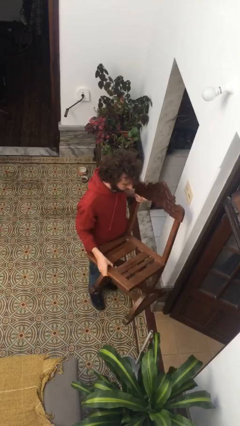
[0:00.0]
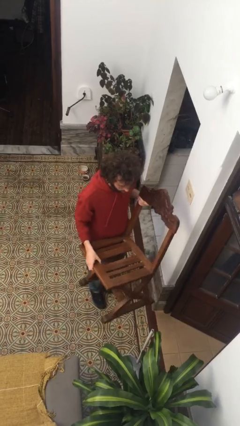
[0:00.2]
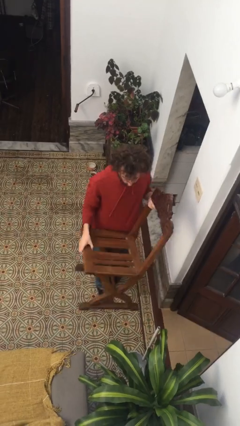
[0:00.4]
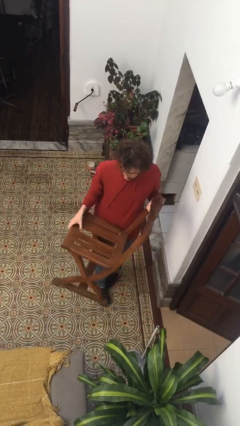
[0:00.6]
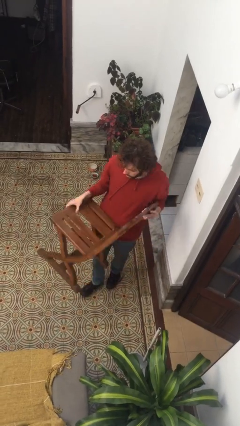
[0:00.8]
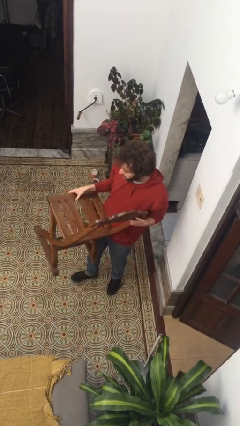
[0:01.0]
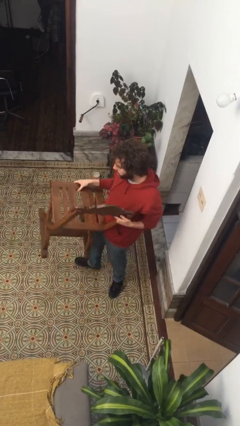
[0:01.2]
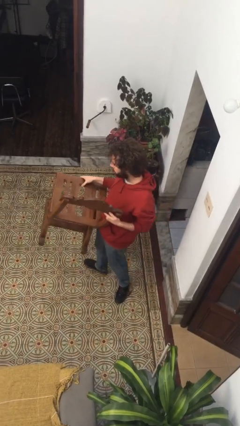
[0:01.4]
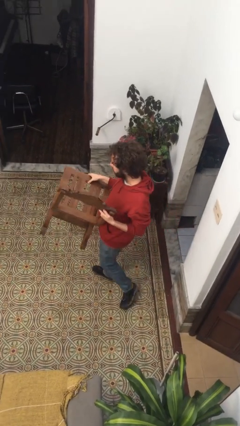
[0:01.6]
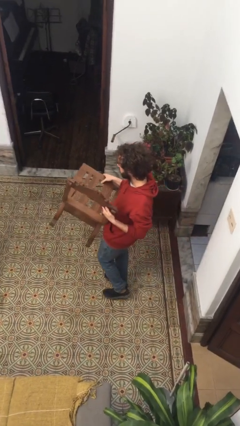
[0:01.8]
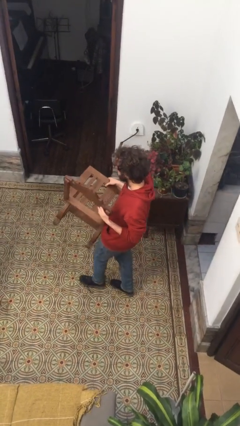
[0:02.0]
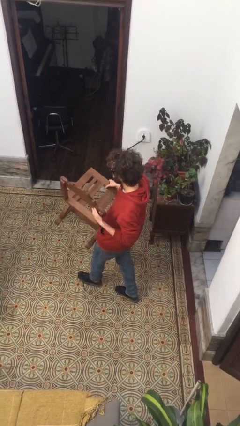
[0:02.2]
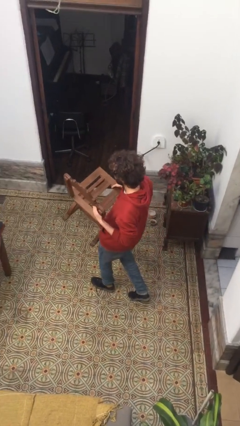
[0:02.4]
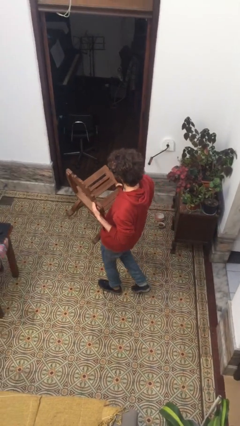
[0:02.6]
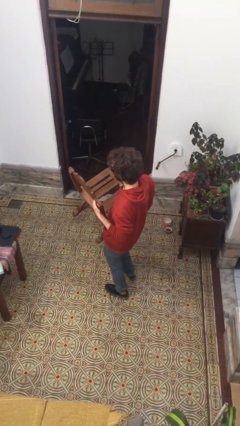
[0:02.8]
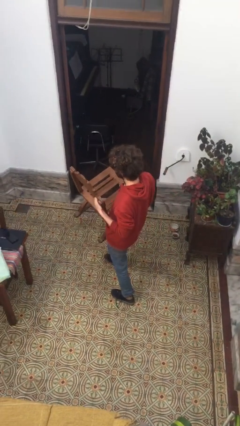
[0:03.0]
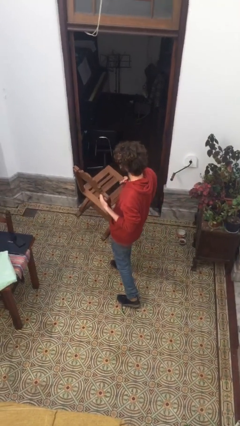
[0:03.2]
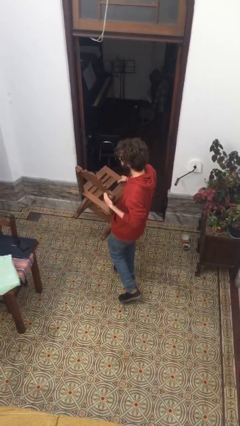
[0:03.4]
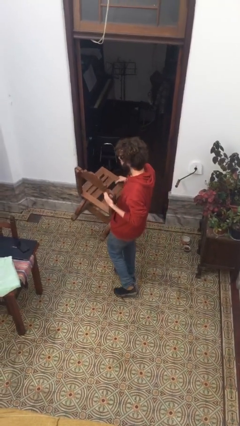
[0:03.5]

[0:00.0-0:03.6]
person carries furniture

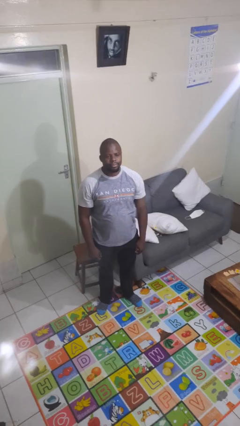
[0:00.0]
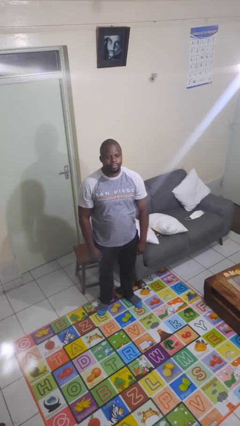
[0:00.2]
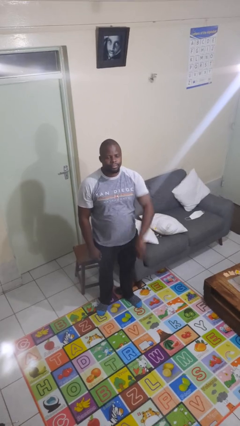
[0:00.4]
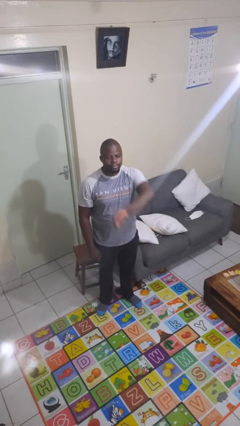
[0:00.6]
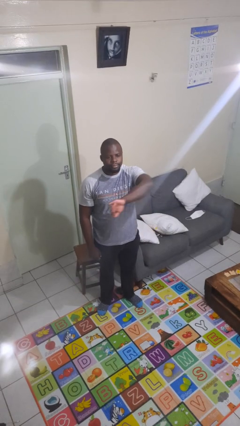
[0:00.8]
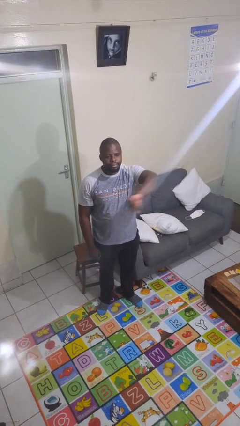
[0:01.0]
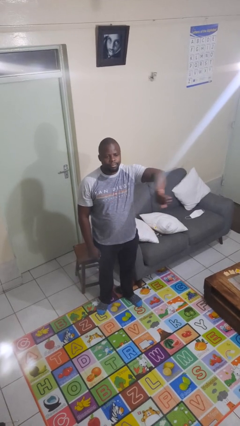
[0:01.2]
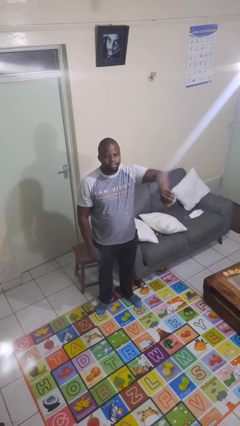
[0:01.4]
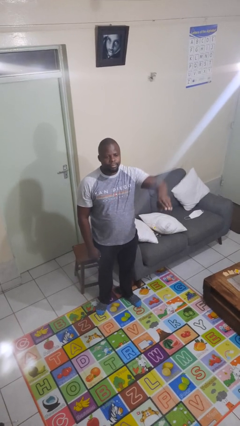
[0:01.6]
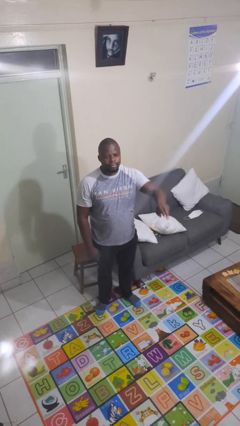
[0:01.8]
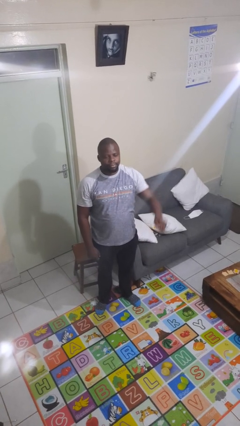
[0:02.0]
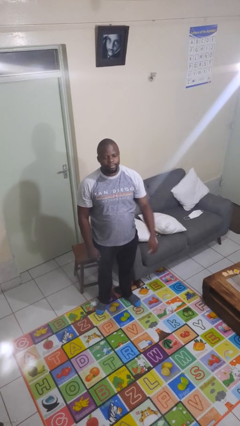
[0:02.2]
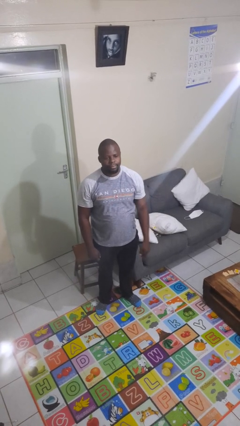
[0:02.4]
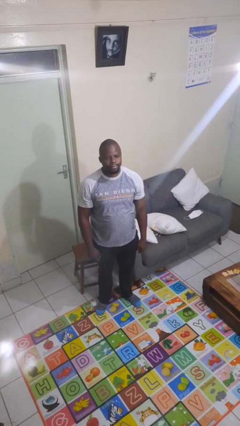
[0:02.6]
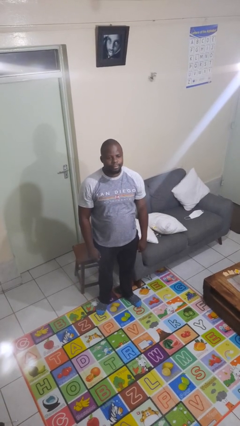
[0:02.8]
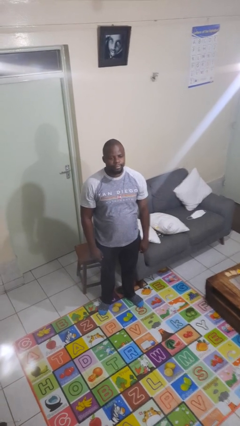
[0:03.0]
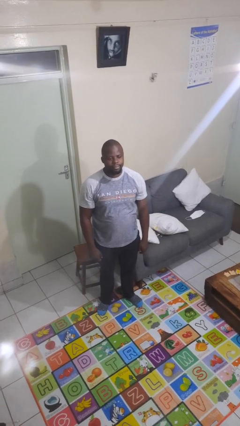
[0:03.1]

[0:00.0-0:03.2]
person gestures swipe left

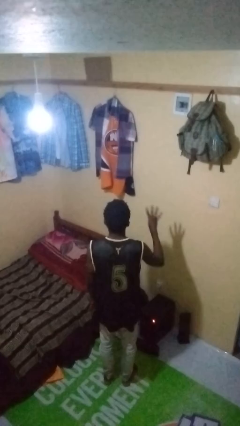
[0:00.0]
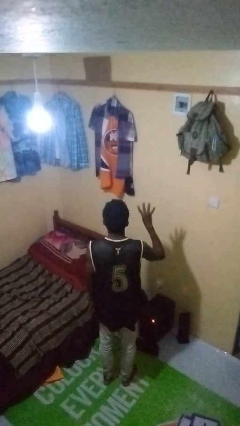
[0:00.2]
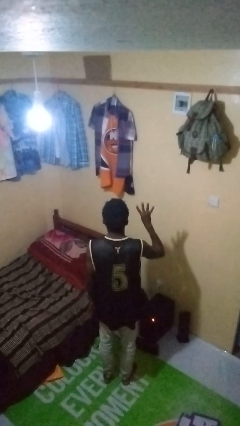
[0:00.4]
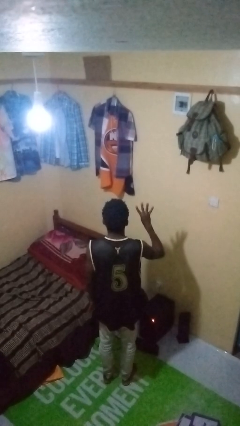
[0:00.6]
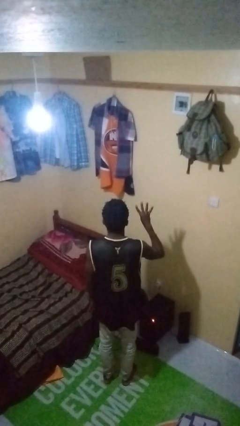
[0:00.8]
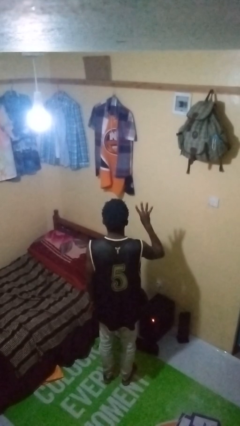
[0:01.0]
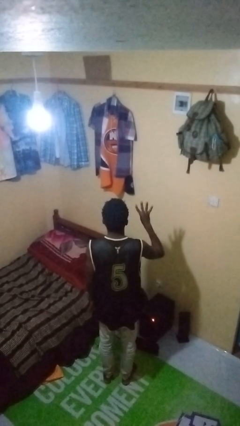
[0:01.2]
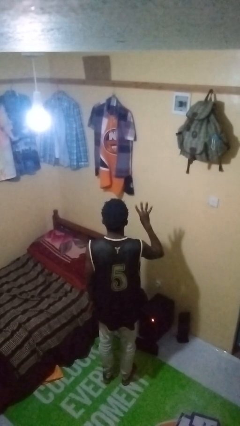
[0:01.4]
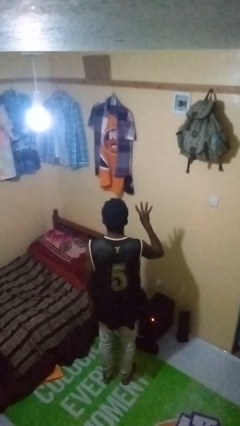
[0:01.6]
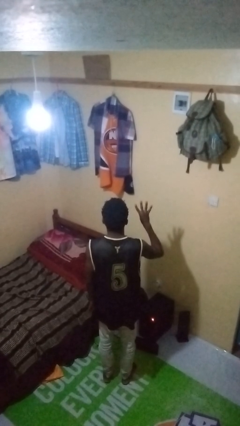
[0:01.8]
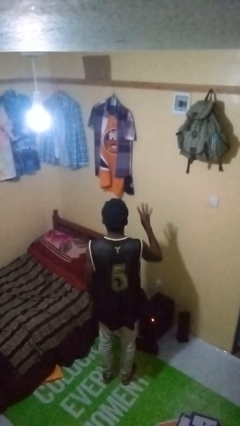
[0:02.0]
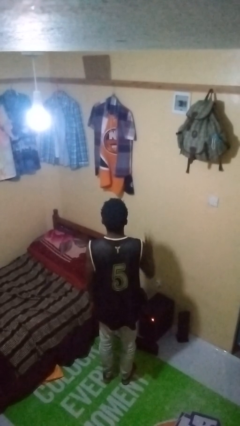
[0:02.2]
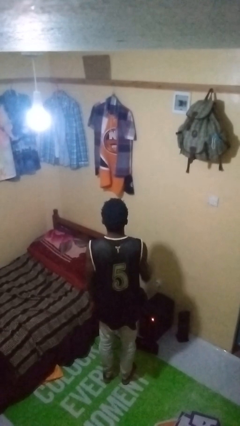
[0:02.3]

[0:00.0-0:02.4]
person gestures number four

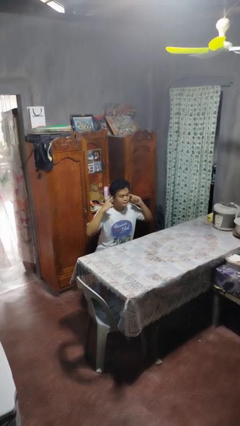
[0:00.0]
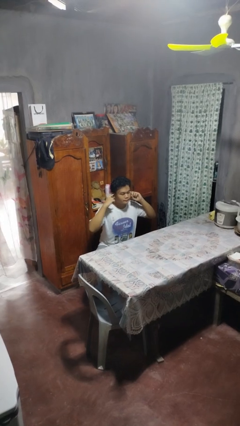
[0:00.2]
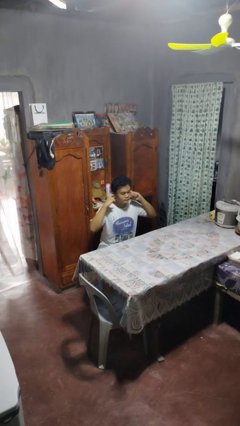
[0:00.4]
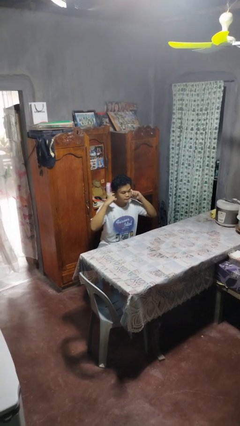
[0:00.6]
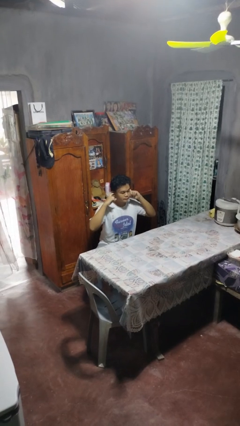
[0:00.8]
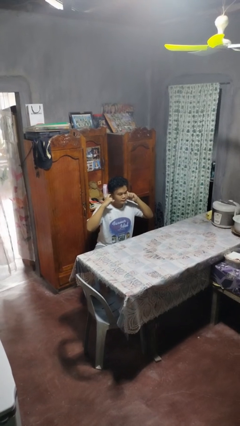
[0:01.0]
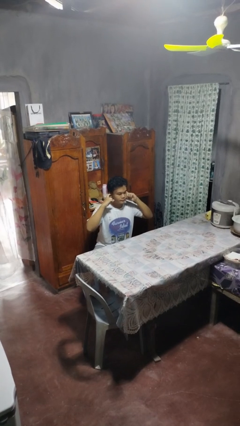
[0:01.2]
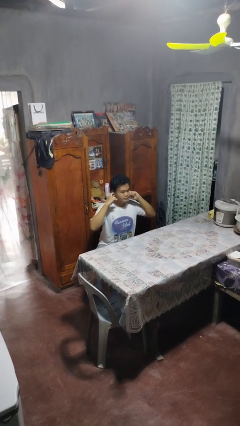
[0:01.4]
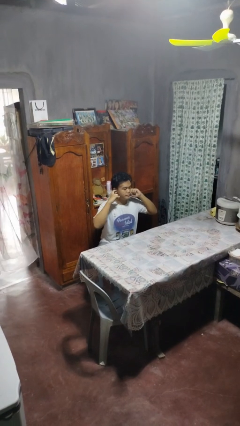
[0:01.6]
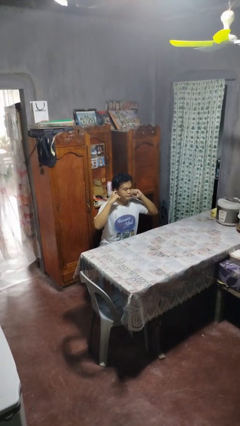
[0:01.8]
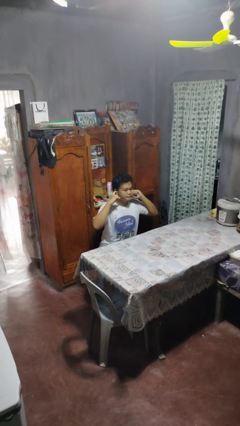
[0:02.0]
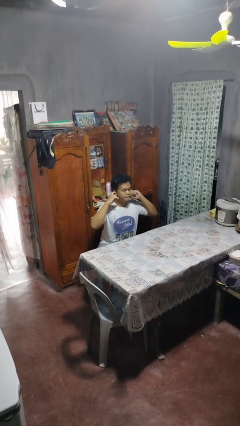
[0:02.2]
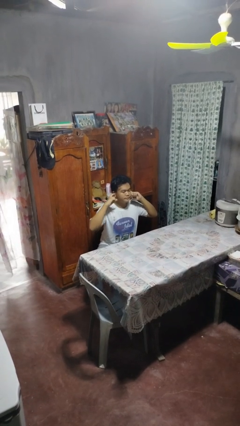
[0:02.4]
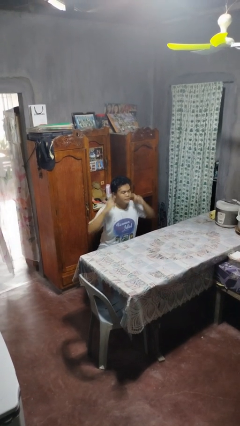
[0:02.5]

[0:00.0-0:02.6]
person puts fingers in ear

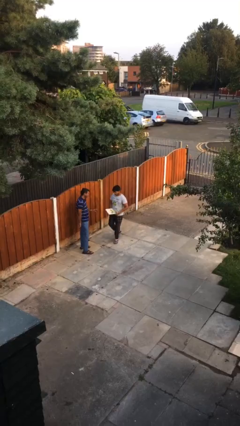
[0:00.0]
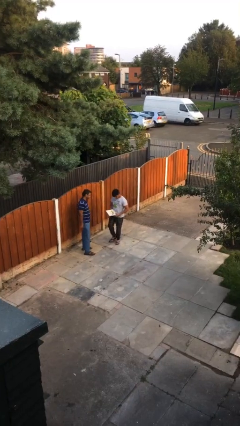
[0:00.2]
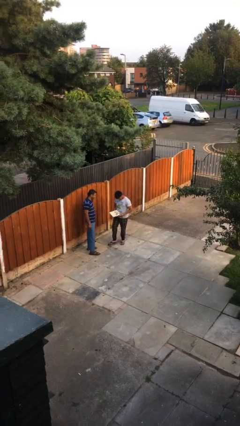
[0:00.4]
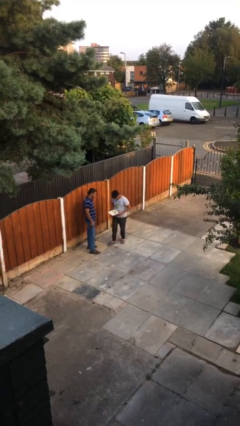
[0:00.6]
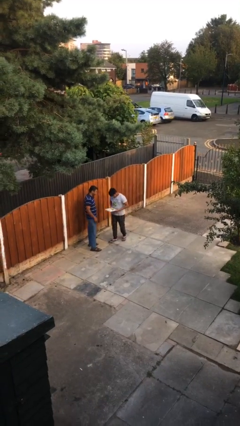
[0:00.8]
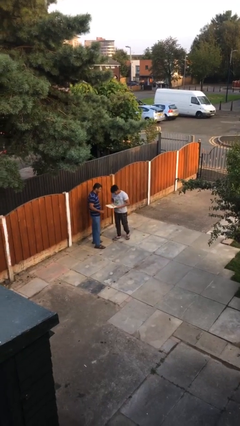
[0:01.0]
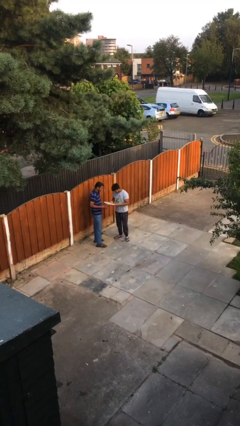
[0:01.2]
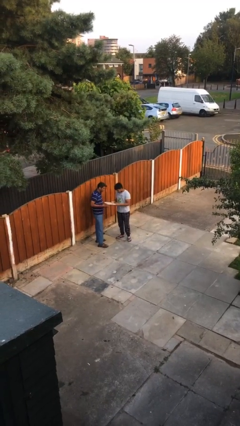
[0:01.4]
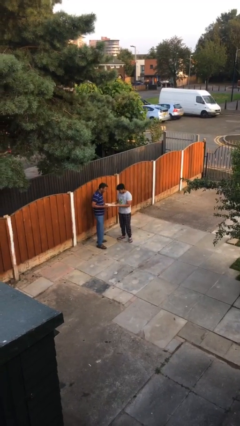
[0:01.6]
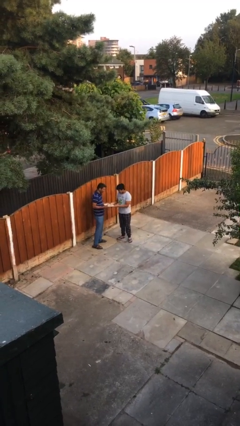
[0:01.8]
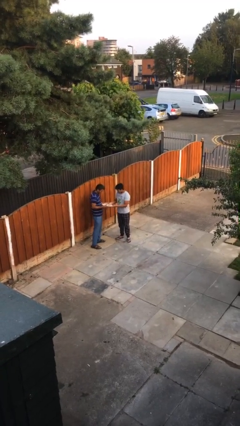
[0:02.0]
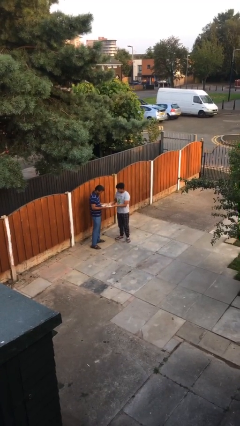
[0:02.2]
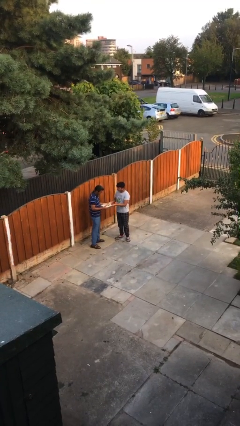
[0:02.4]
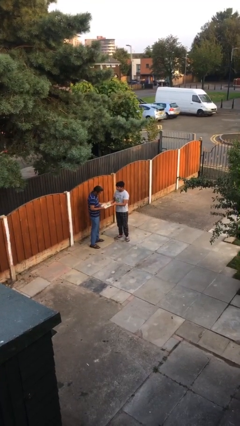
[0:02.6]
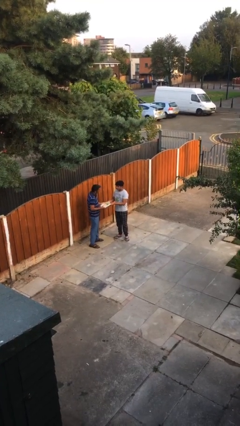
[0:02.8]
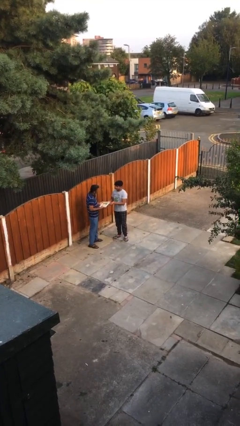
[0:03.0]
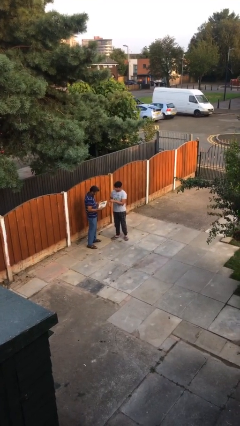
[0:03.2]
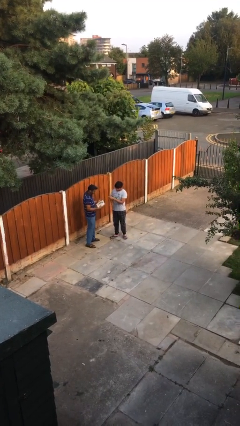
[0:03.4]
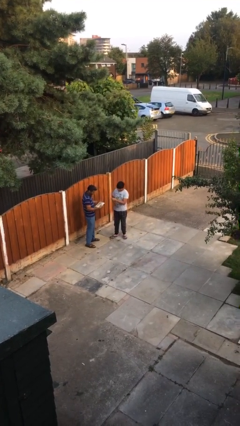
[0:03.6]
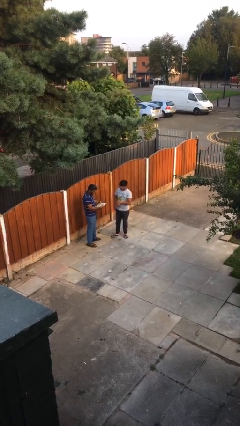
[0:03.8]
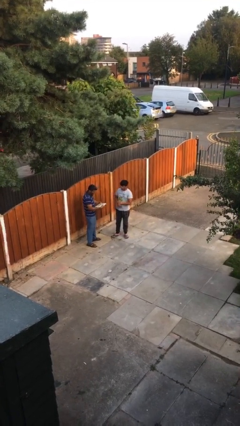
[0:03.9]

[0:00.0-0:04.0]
person transfers object to person

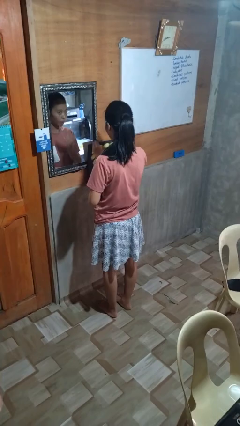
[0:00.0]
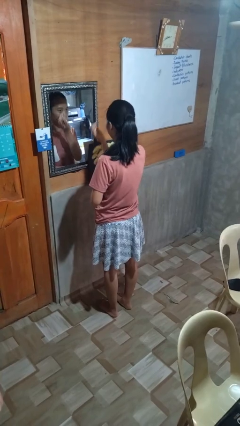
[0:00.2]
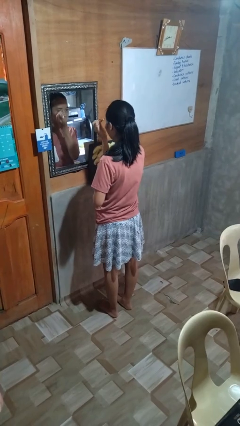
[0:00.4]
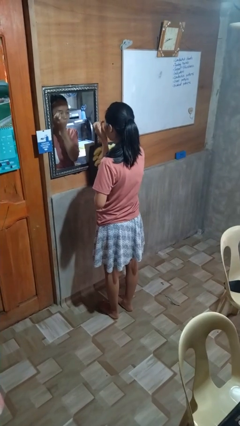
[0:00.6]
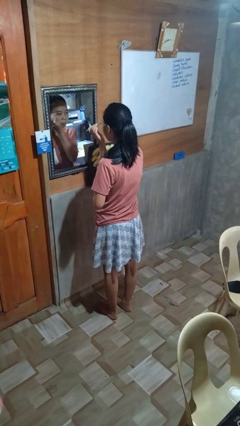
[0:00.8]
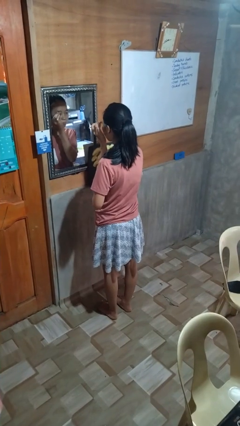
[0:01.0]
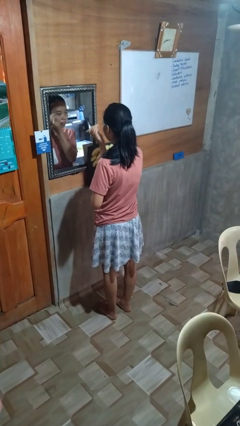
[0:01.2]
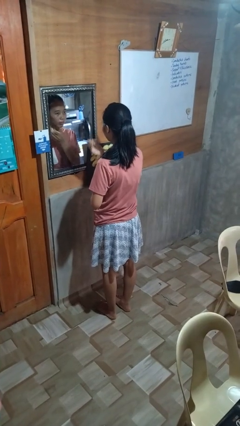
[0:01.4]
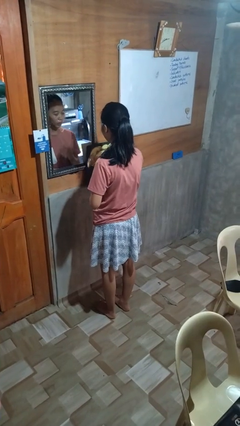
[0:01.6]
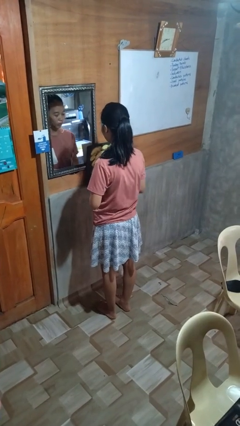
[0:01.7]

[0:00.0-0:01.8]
person applies eye makeup
